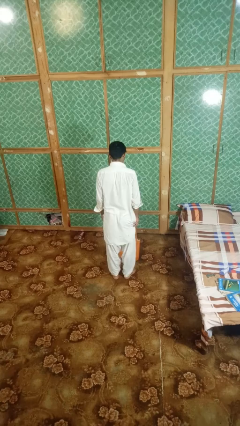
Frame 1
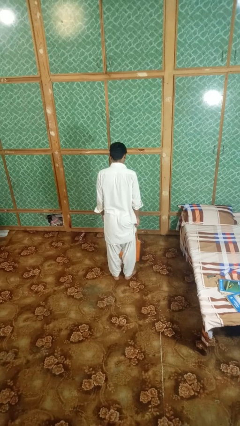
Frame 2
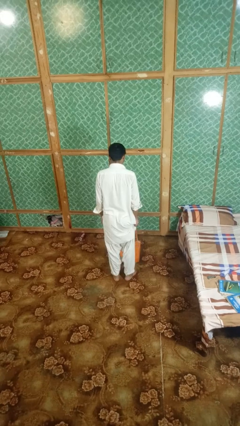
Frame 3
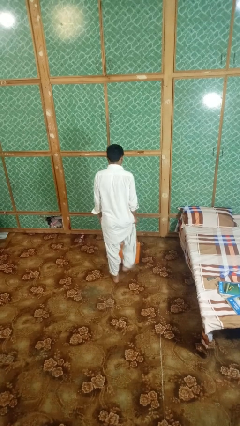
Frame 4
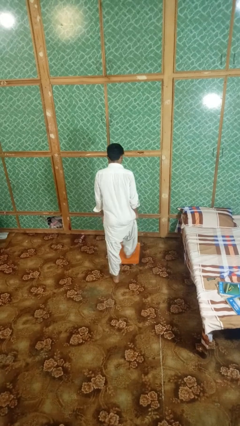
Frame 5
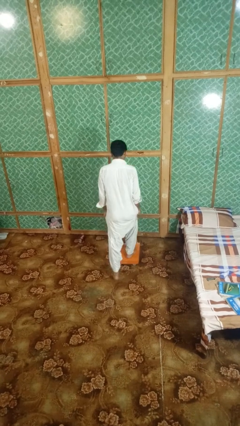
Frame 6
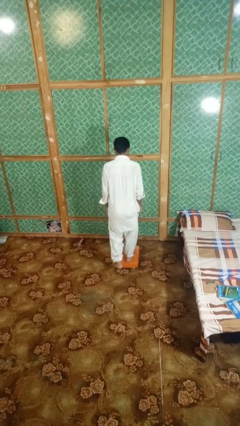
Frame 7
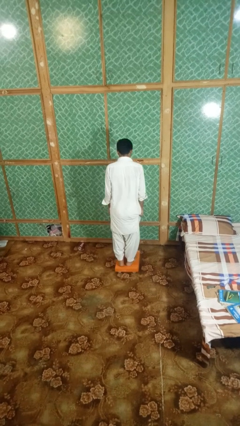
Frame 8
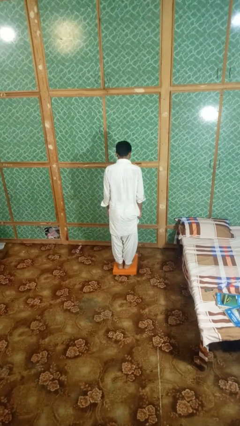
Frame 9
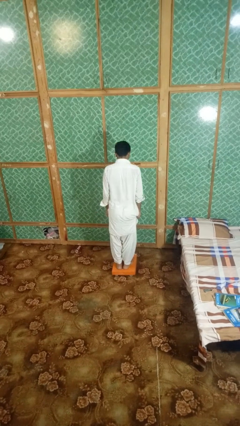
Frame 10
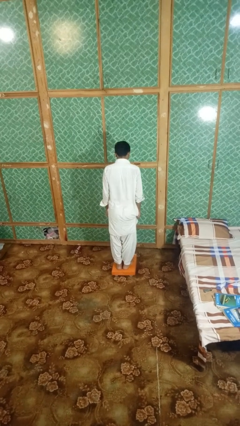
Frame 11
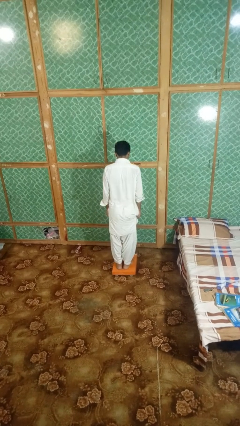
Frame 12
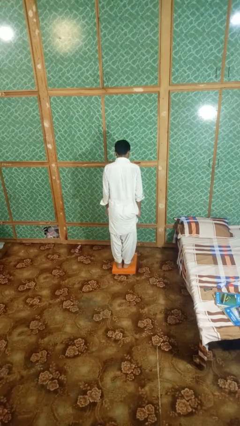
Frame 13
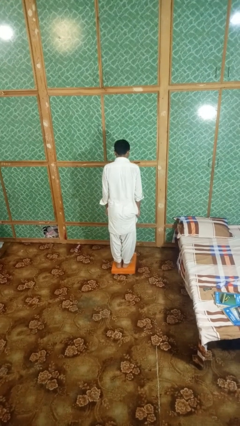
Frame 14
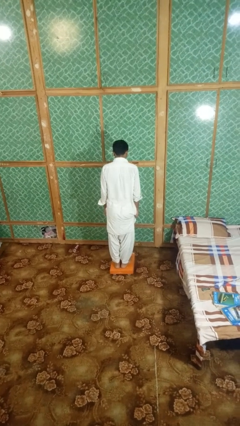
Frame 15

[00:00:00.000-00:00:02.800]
person uses bodyweight scale

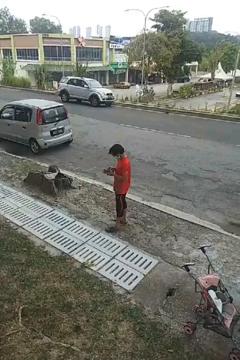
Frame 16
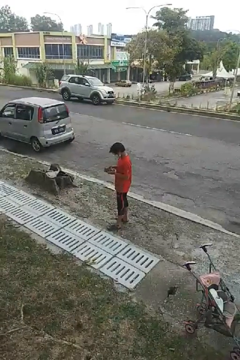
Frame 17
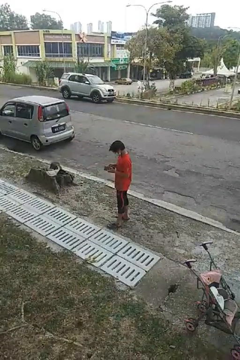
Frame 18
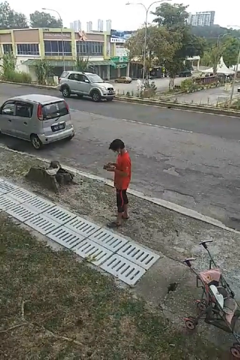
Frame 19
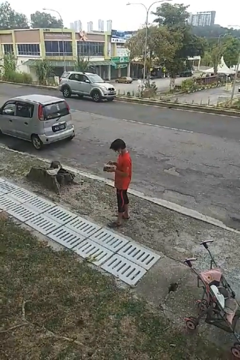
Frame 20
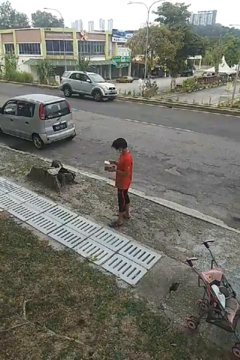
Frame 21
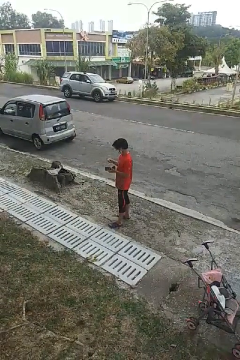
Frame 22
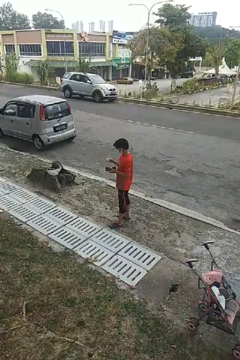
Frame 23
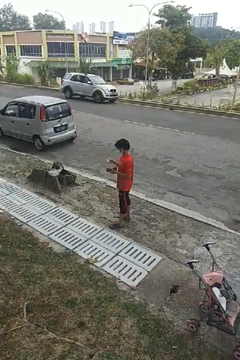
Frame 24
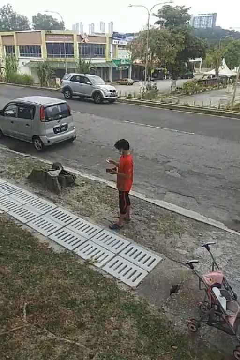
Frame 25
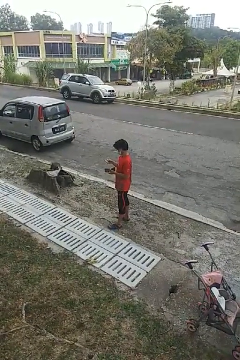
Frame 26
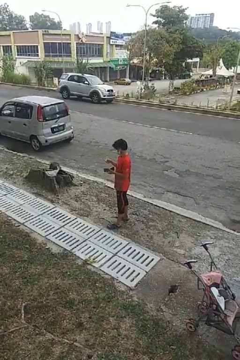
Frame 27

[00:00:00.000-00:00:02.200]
person takes object from purse

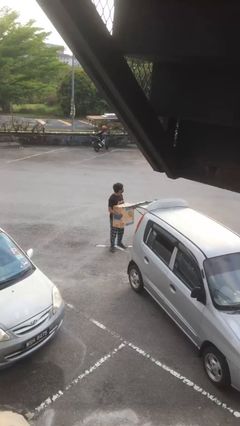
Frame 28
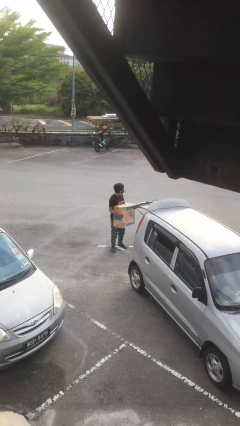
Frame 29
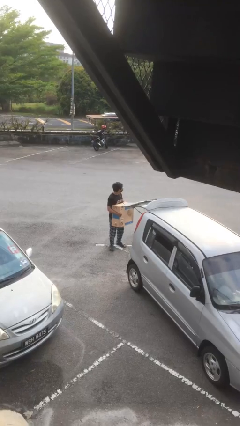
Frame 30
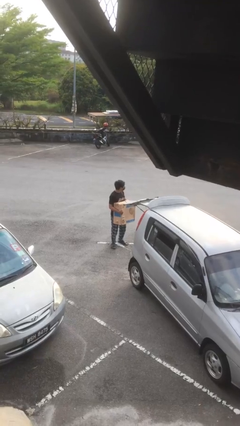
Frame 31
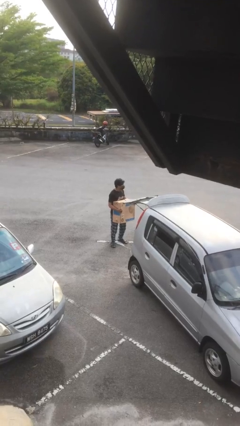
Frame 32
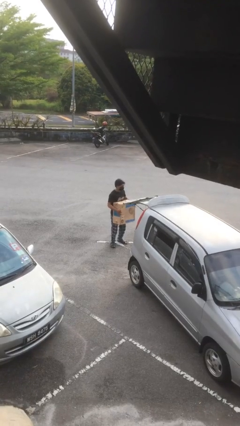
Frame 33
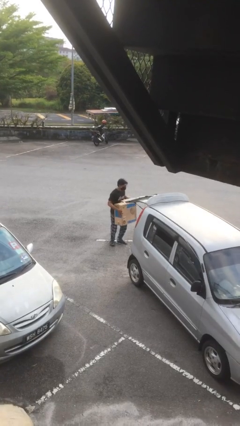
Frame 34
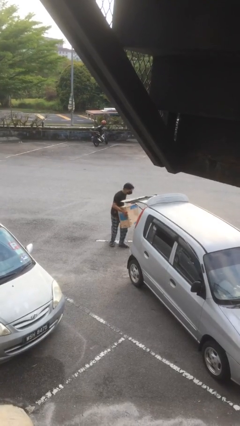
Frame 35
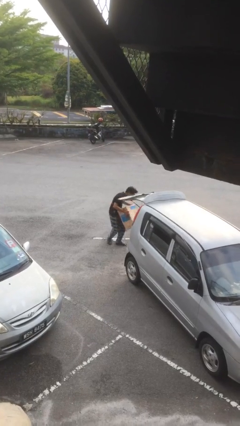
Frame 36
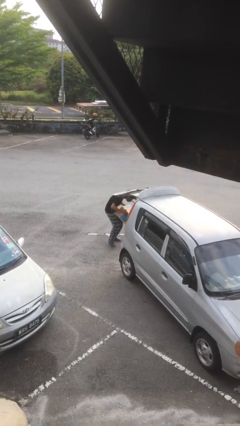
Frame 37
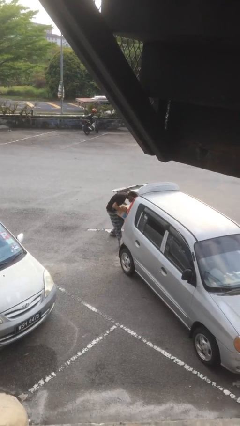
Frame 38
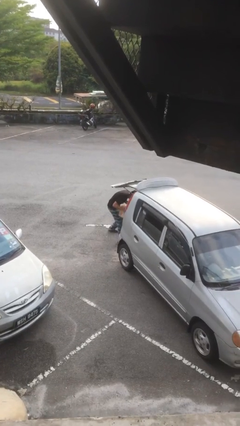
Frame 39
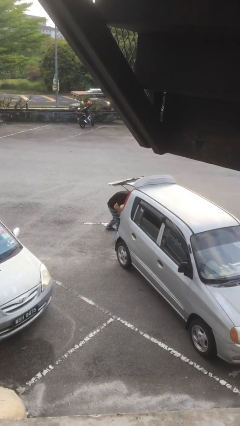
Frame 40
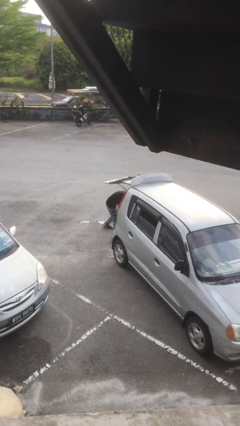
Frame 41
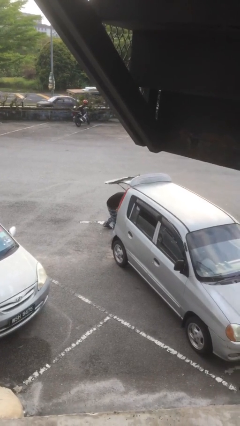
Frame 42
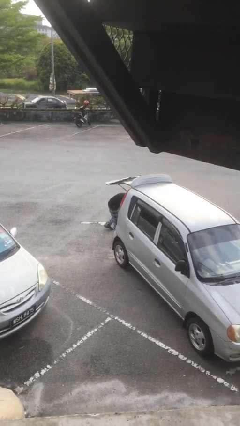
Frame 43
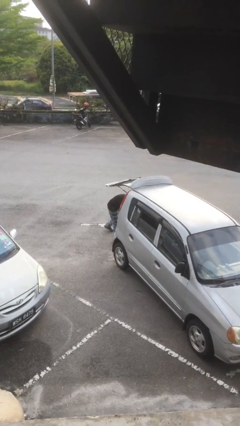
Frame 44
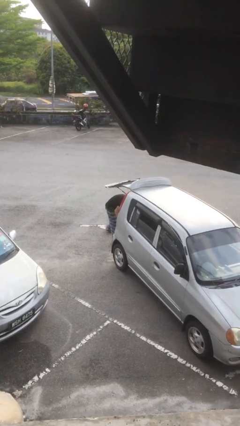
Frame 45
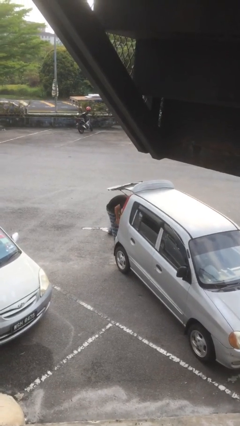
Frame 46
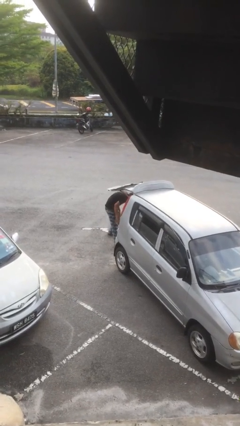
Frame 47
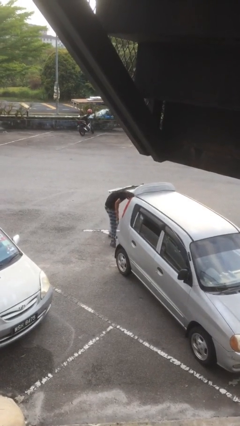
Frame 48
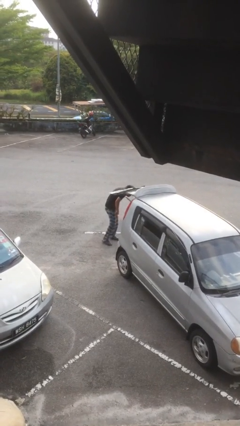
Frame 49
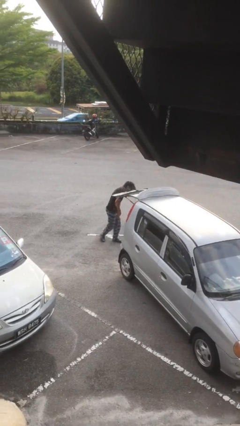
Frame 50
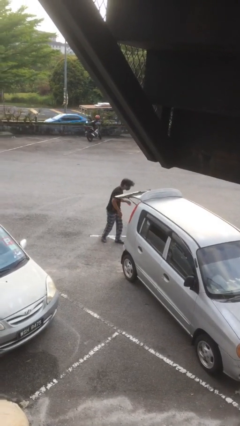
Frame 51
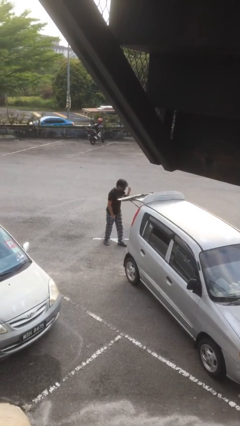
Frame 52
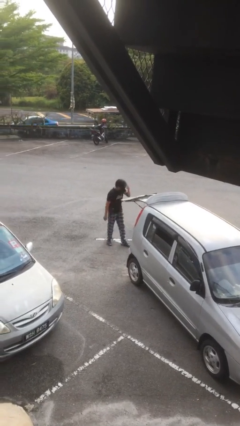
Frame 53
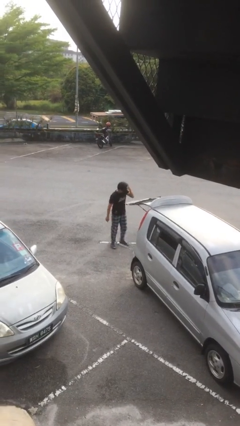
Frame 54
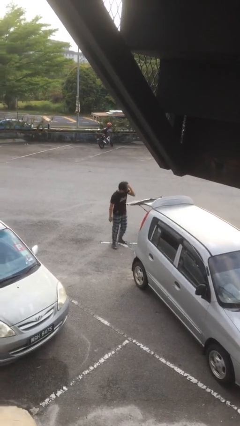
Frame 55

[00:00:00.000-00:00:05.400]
person loads car

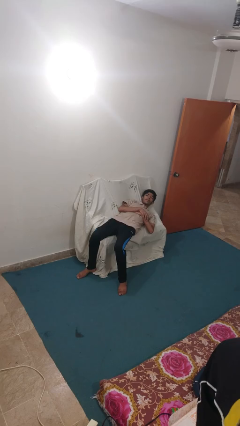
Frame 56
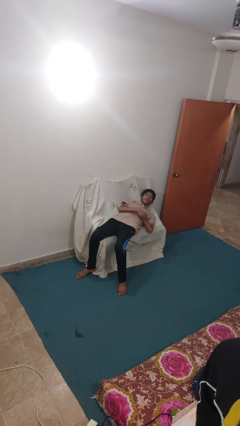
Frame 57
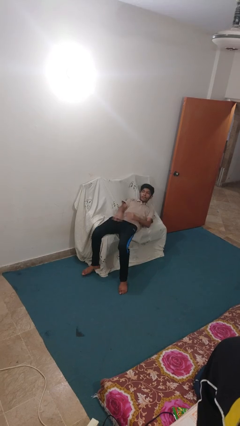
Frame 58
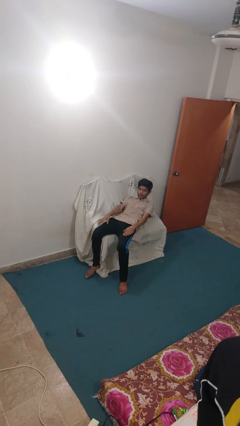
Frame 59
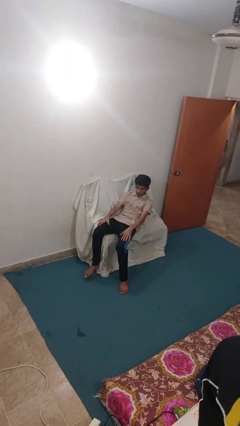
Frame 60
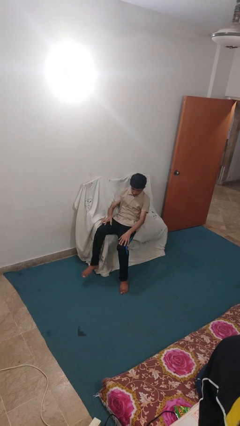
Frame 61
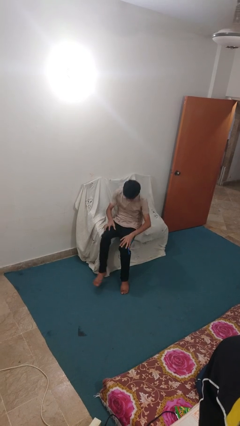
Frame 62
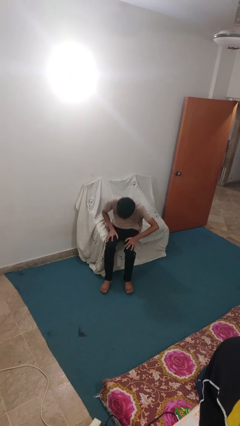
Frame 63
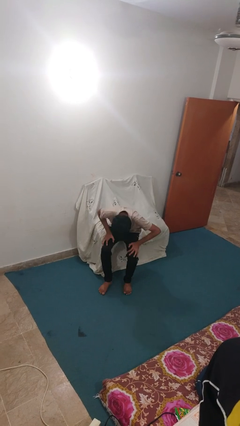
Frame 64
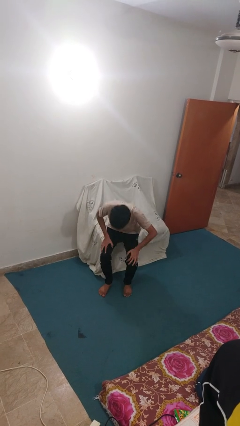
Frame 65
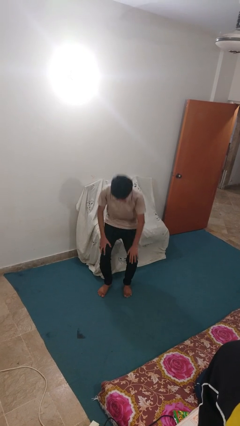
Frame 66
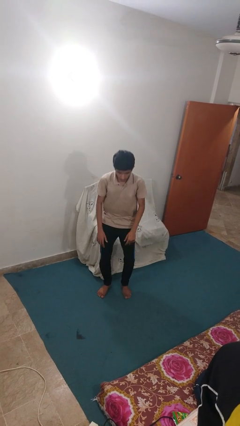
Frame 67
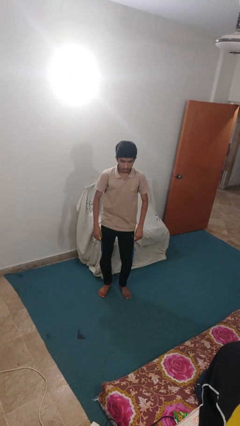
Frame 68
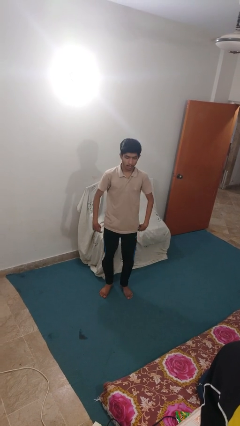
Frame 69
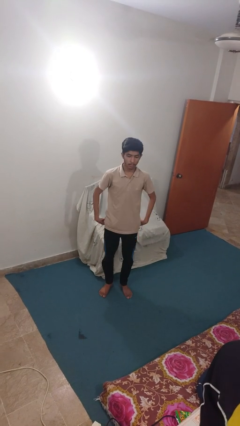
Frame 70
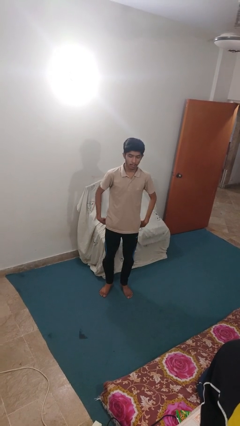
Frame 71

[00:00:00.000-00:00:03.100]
person stands up

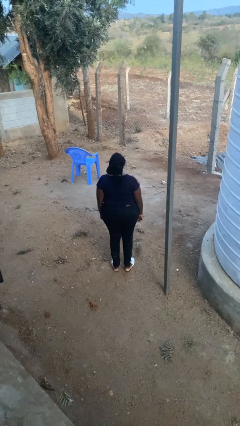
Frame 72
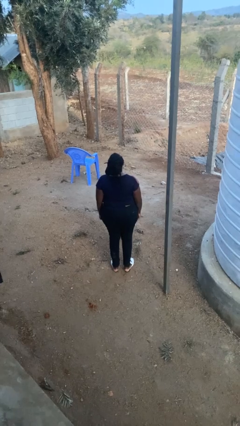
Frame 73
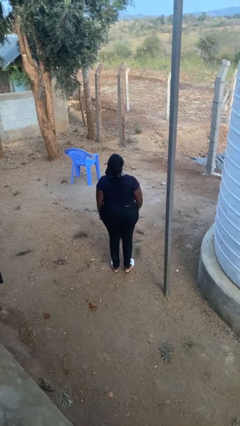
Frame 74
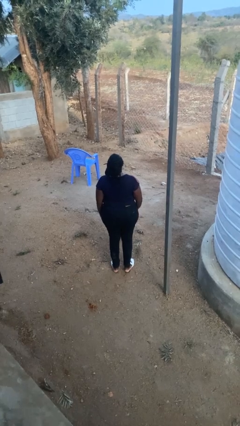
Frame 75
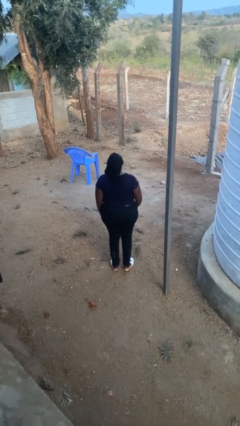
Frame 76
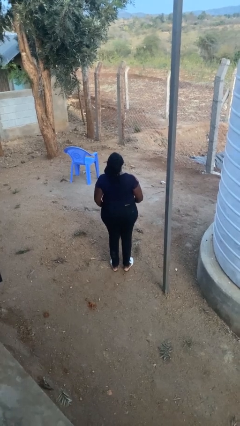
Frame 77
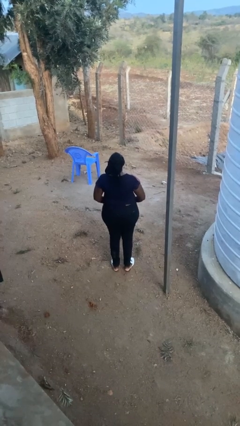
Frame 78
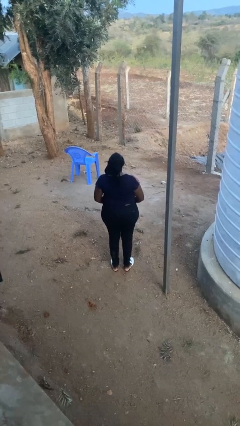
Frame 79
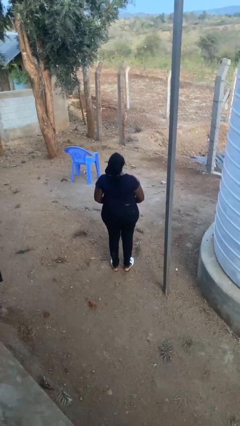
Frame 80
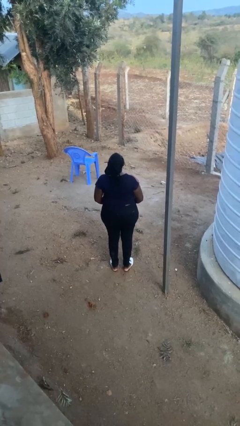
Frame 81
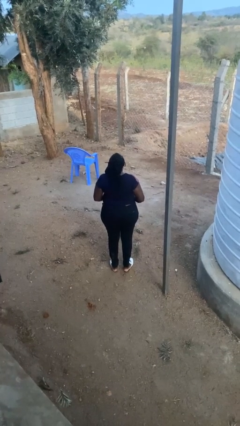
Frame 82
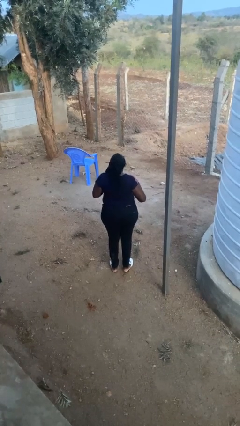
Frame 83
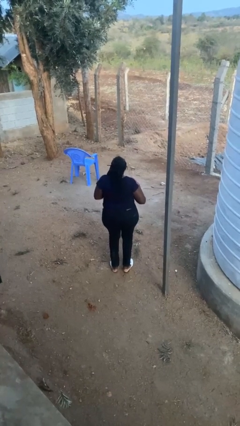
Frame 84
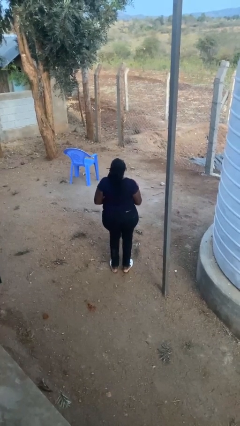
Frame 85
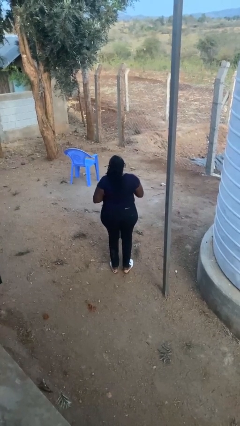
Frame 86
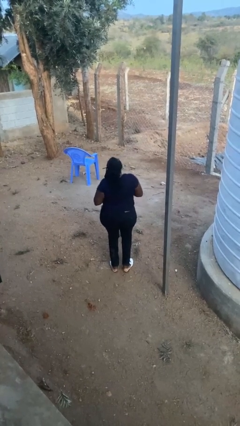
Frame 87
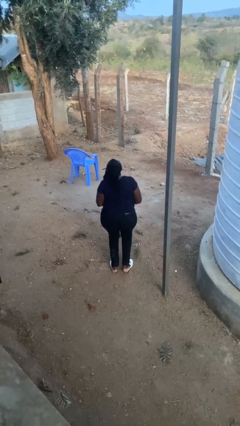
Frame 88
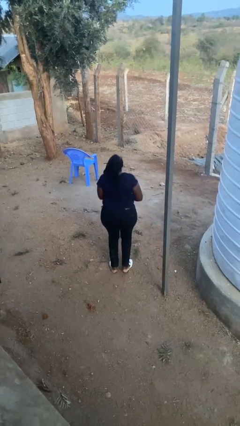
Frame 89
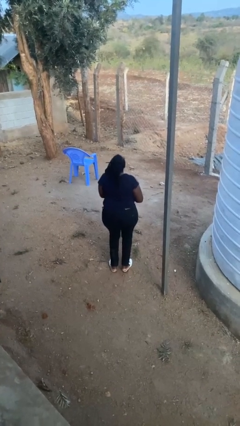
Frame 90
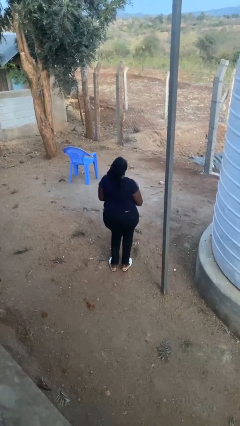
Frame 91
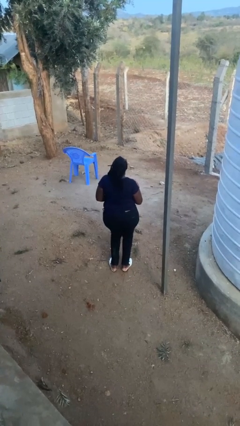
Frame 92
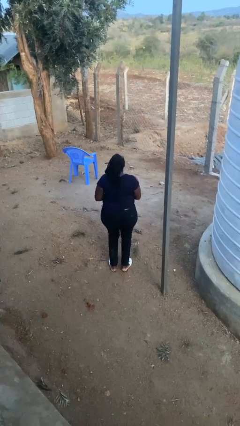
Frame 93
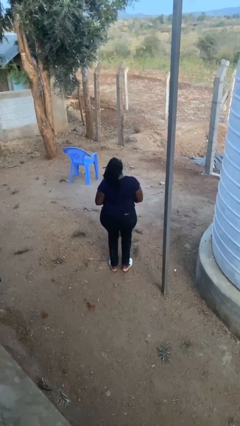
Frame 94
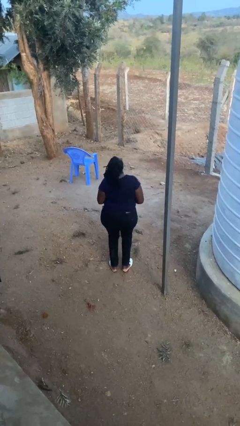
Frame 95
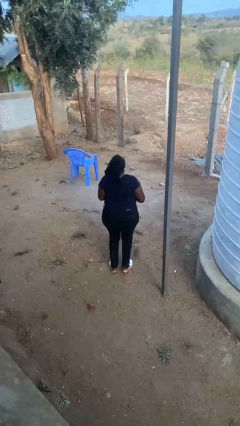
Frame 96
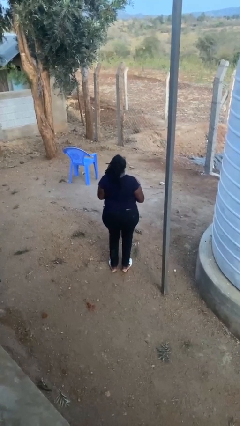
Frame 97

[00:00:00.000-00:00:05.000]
person dances in place
